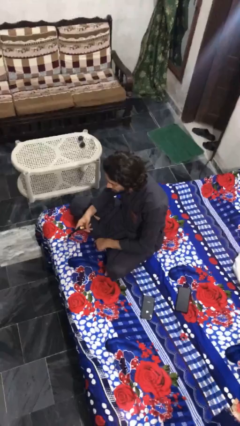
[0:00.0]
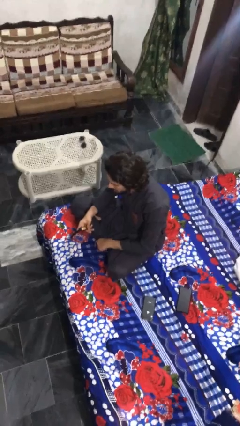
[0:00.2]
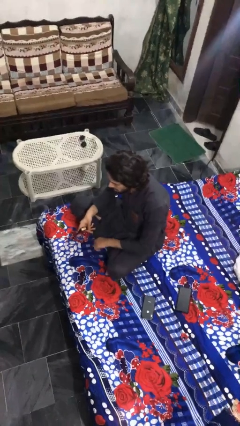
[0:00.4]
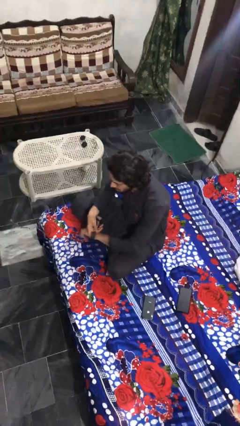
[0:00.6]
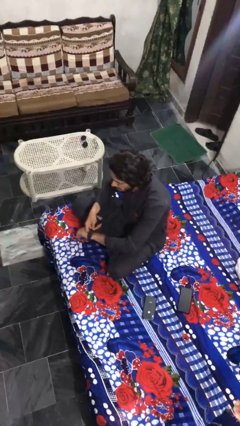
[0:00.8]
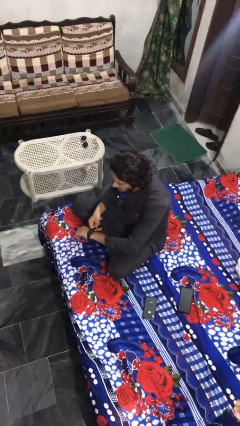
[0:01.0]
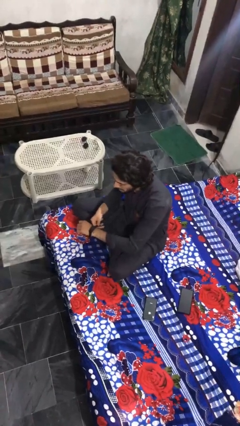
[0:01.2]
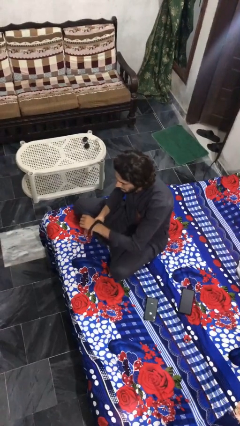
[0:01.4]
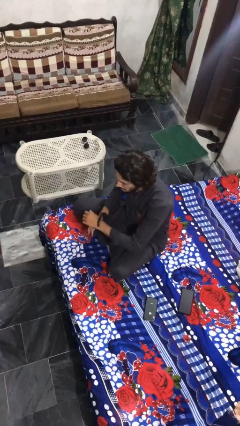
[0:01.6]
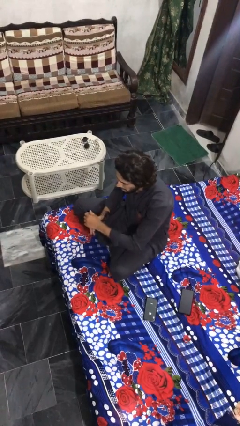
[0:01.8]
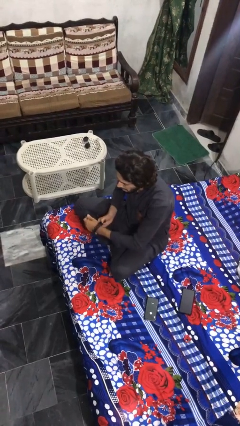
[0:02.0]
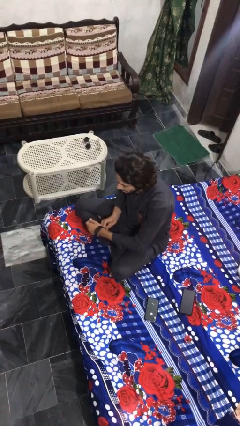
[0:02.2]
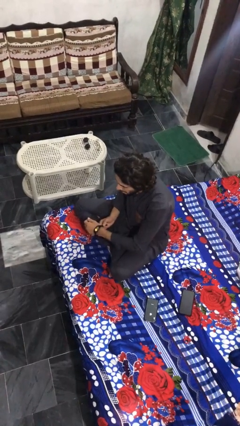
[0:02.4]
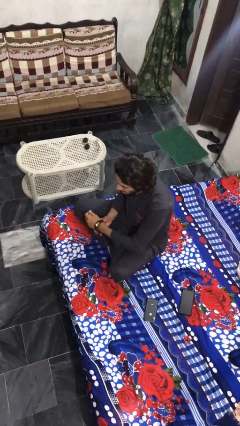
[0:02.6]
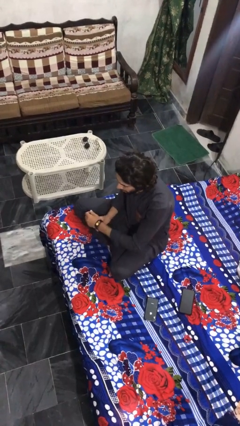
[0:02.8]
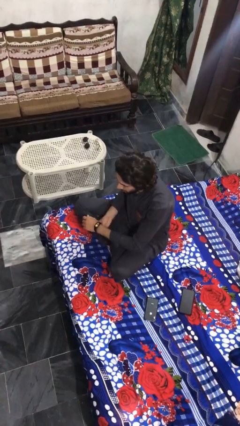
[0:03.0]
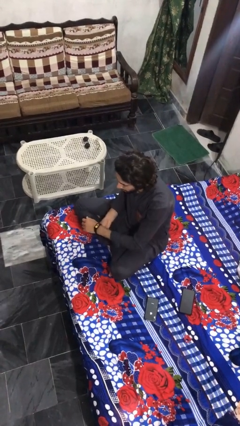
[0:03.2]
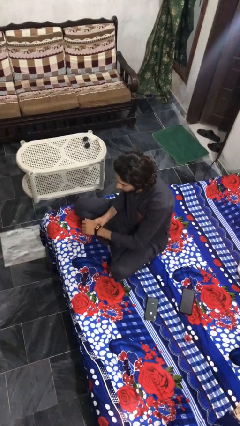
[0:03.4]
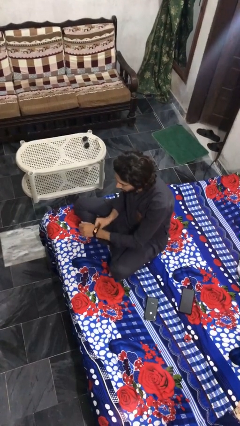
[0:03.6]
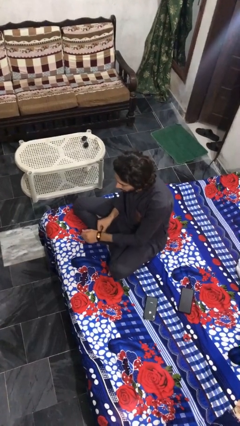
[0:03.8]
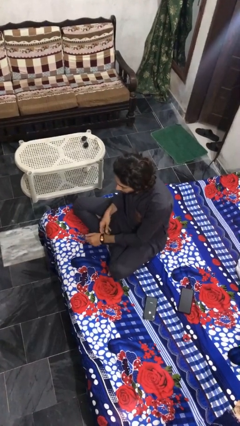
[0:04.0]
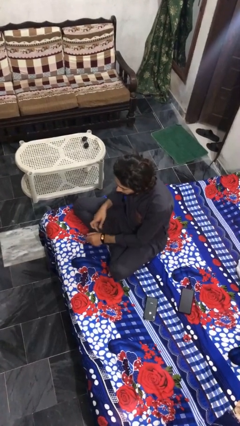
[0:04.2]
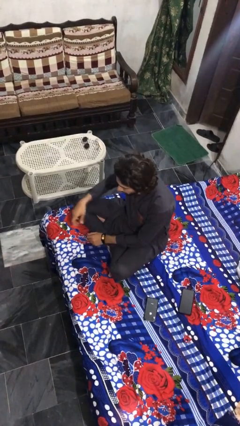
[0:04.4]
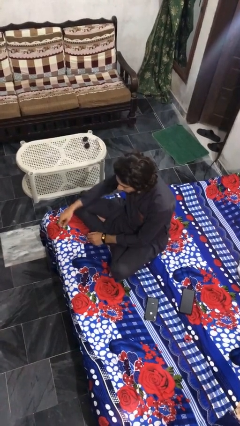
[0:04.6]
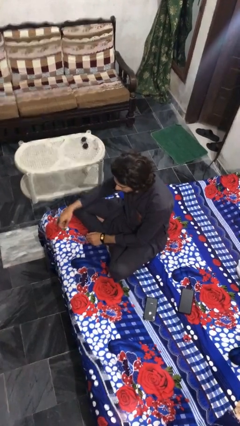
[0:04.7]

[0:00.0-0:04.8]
person puts on wristwatch

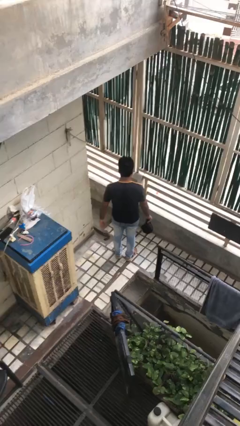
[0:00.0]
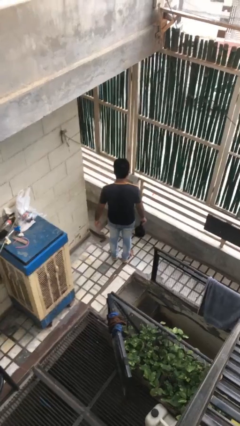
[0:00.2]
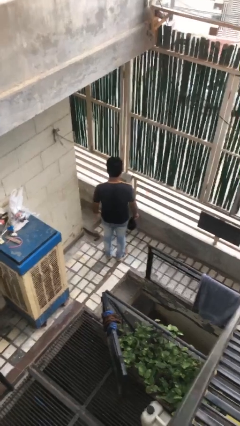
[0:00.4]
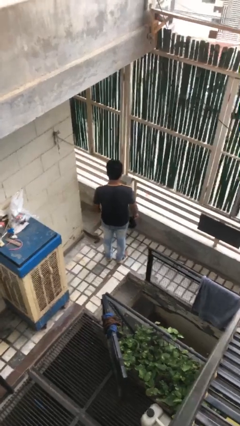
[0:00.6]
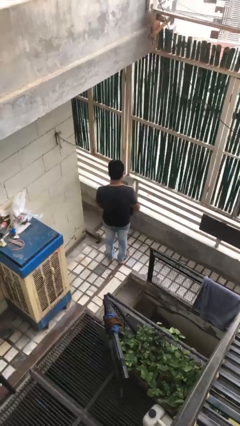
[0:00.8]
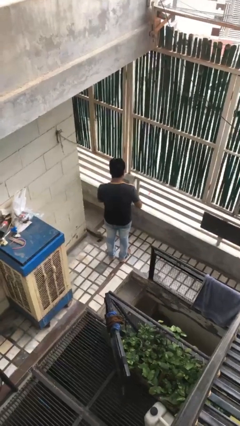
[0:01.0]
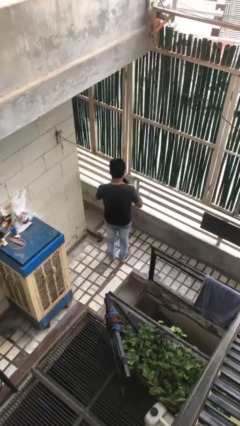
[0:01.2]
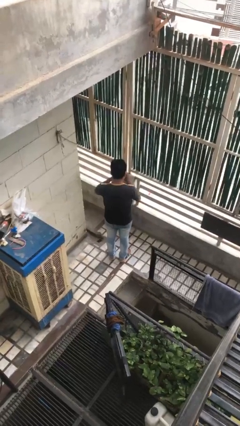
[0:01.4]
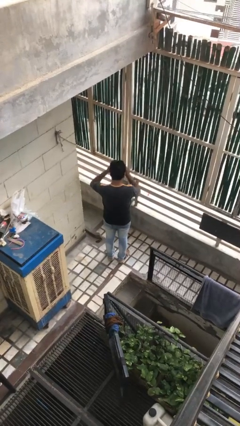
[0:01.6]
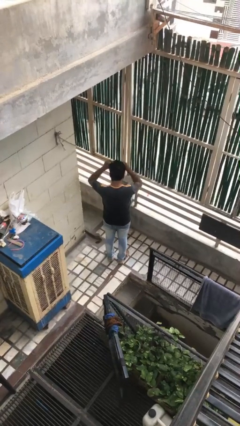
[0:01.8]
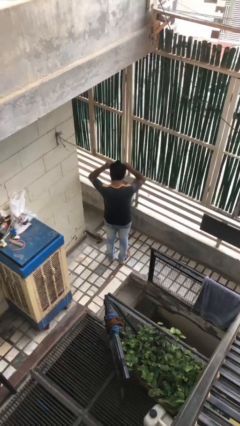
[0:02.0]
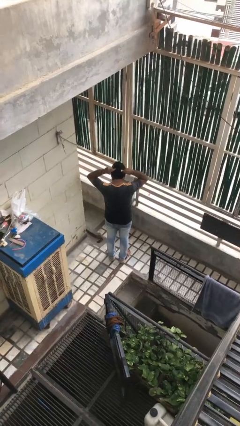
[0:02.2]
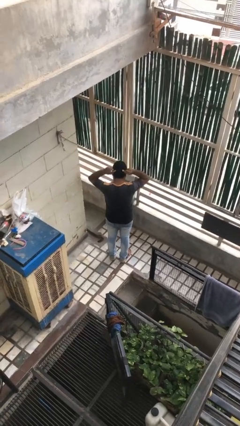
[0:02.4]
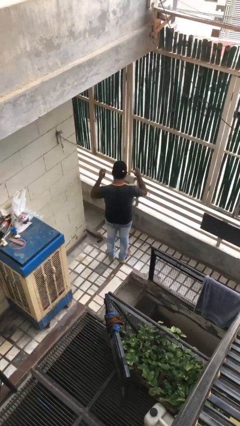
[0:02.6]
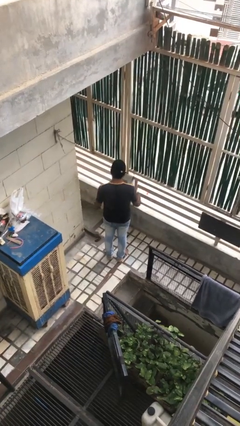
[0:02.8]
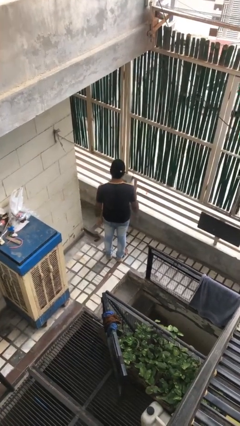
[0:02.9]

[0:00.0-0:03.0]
person puts on hat

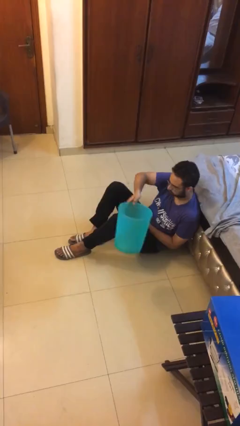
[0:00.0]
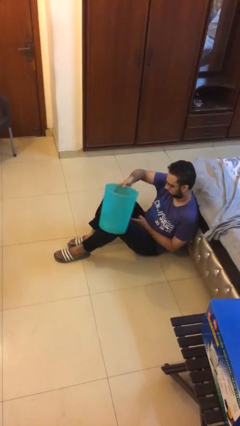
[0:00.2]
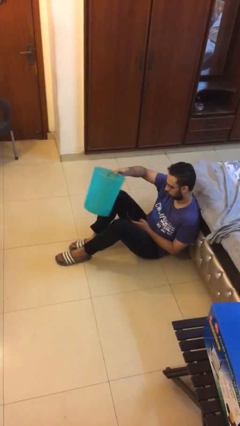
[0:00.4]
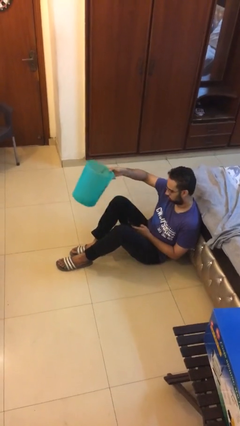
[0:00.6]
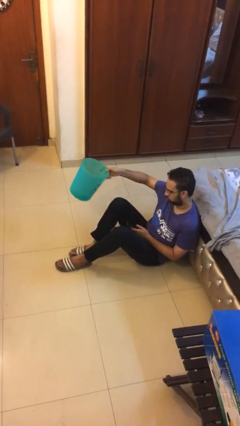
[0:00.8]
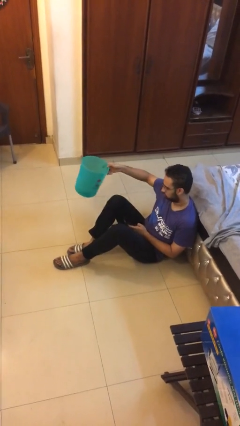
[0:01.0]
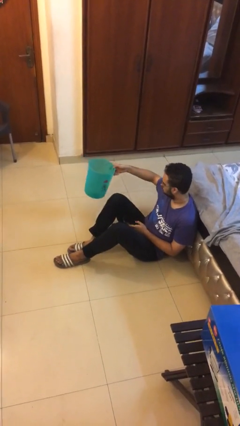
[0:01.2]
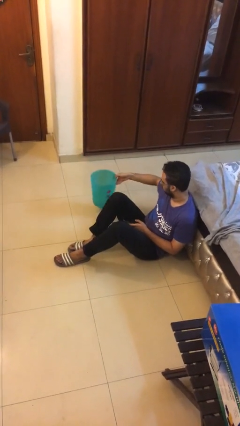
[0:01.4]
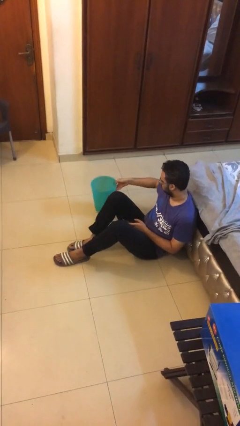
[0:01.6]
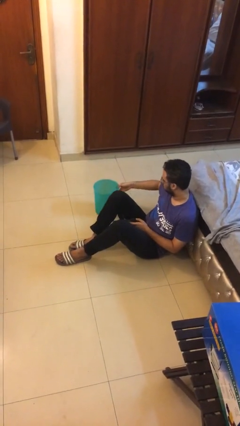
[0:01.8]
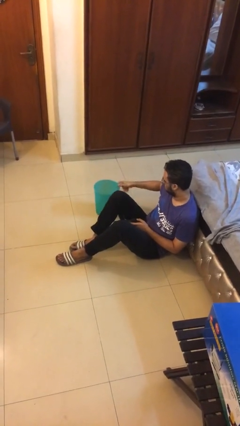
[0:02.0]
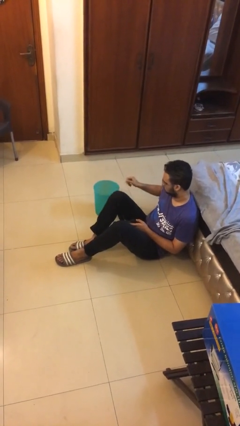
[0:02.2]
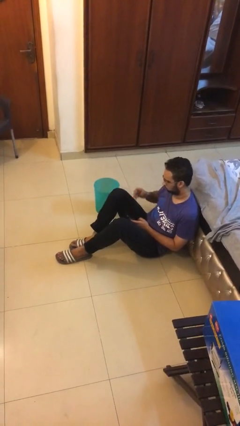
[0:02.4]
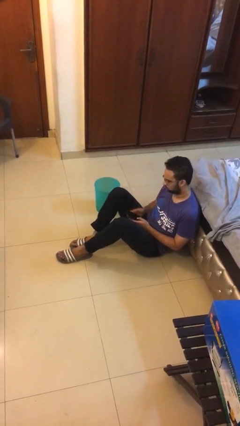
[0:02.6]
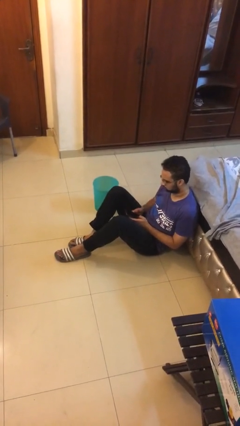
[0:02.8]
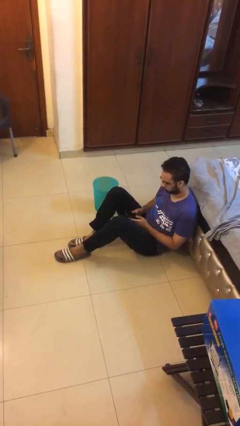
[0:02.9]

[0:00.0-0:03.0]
person puts down object on floor

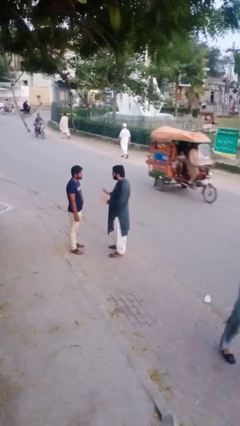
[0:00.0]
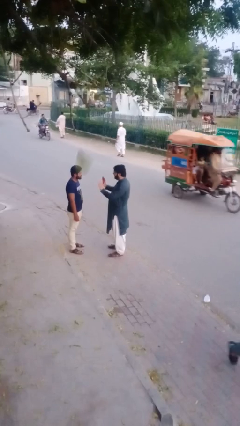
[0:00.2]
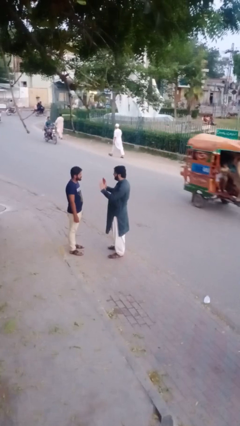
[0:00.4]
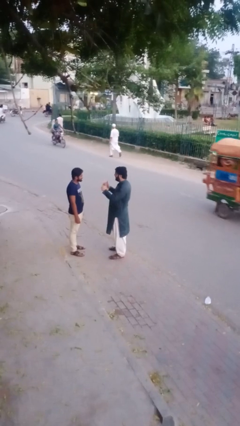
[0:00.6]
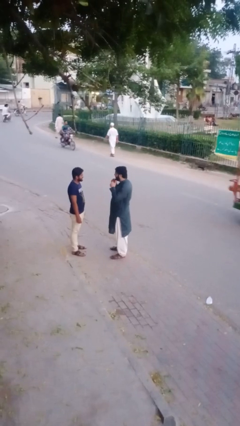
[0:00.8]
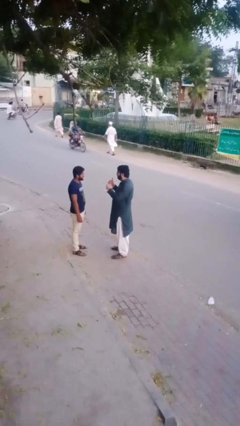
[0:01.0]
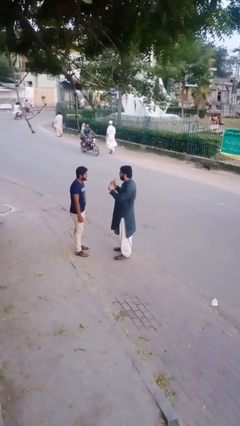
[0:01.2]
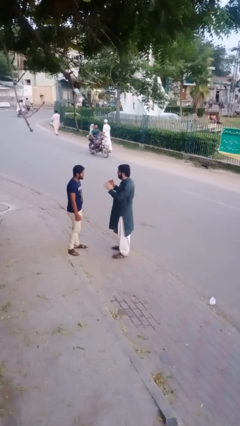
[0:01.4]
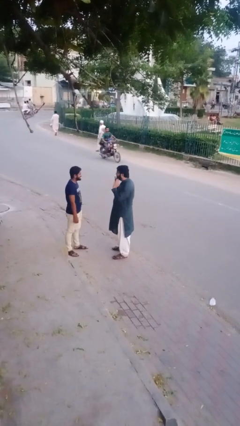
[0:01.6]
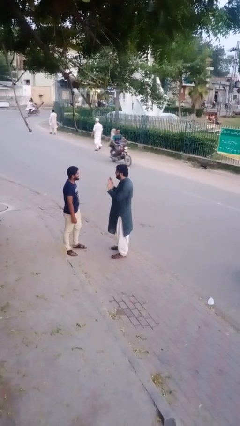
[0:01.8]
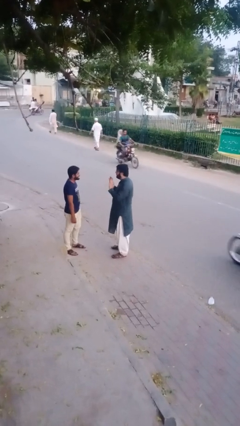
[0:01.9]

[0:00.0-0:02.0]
person talks to person

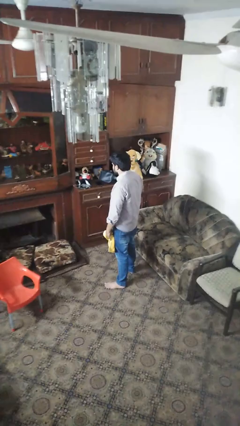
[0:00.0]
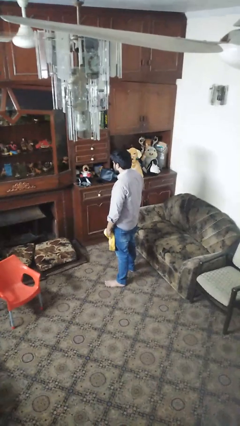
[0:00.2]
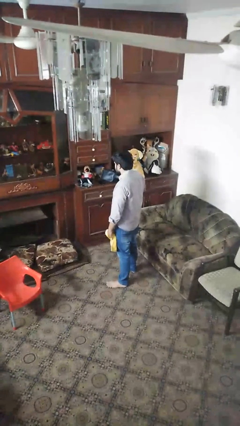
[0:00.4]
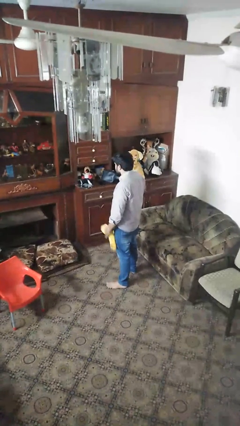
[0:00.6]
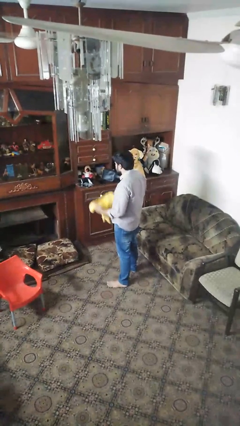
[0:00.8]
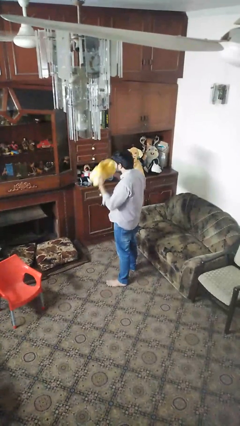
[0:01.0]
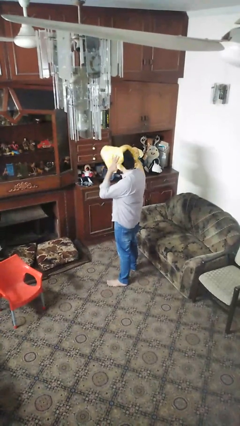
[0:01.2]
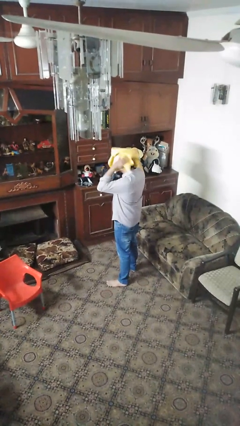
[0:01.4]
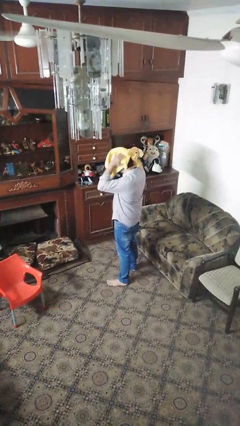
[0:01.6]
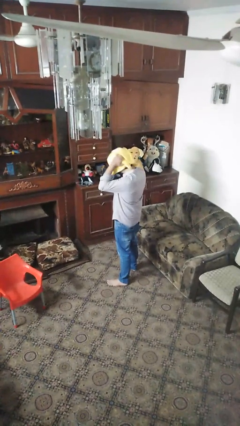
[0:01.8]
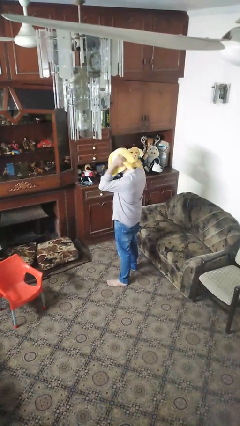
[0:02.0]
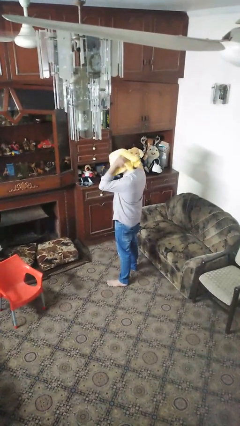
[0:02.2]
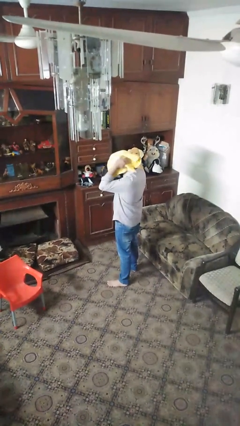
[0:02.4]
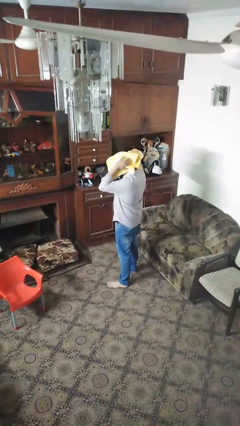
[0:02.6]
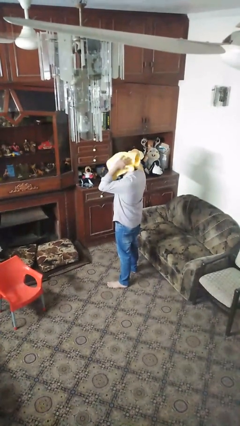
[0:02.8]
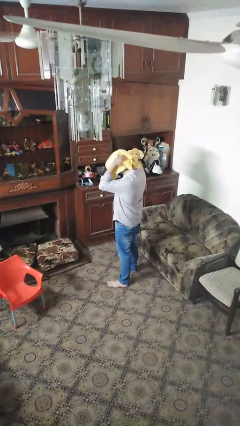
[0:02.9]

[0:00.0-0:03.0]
person dries hair with towel

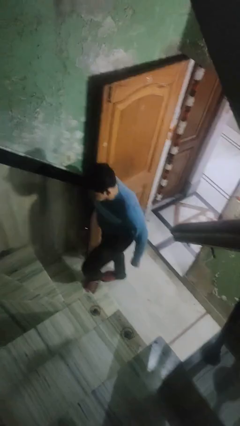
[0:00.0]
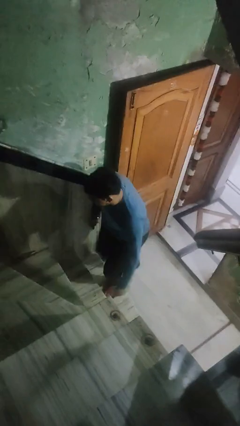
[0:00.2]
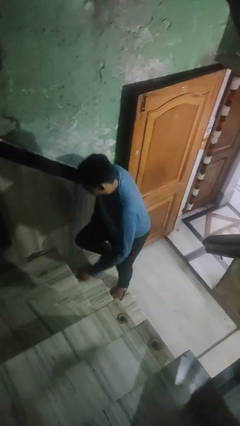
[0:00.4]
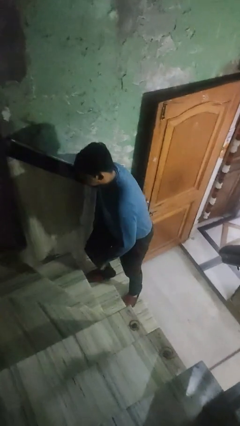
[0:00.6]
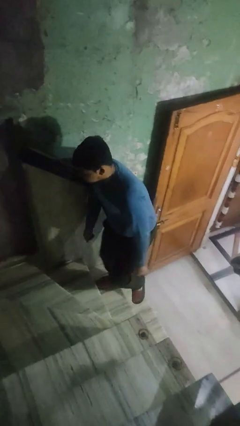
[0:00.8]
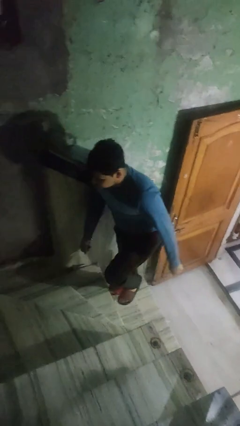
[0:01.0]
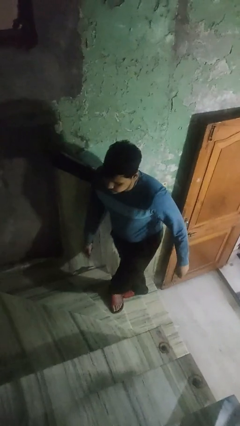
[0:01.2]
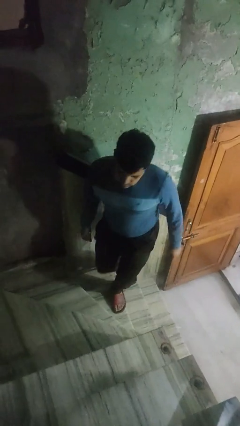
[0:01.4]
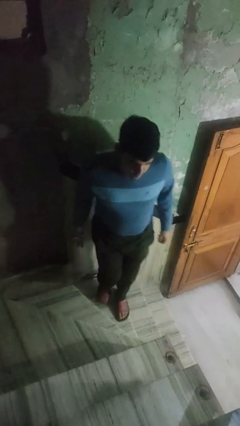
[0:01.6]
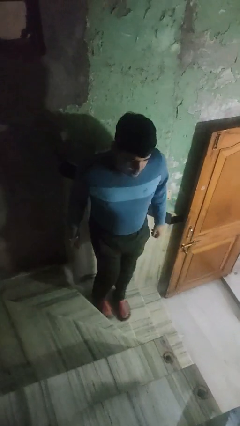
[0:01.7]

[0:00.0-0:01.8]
person climbs up stairs
